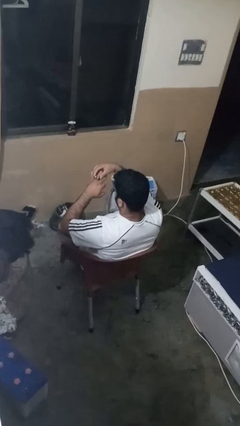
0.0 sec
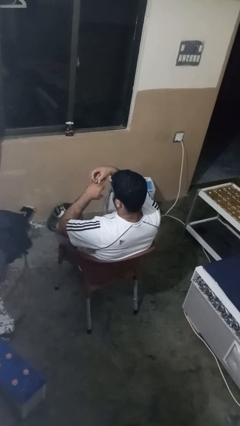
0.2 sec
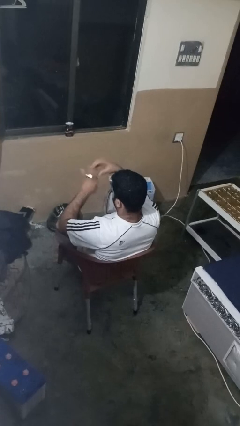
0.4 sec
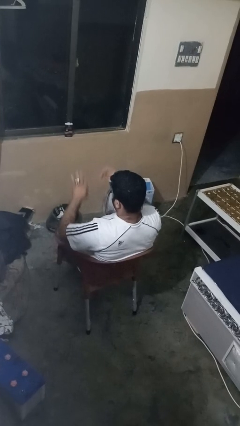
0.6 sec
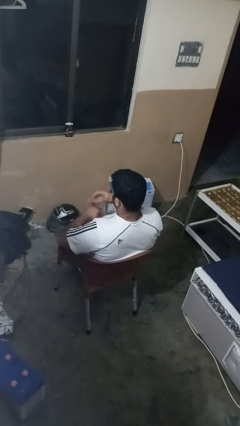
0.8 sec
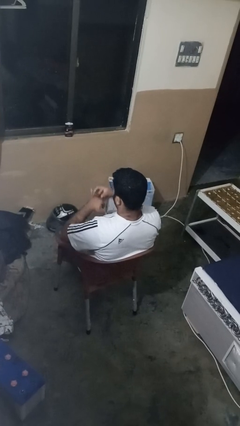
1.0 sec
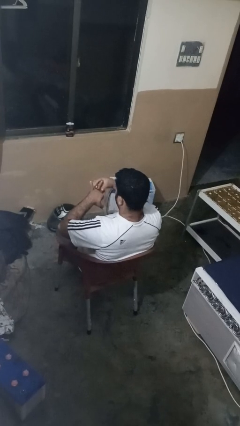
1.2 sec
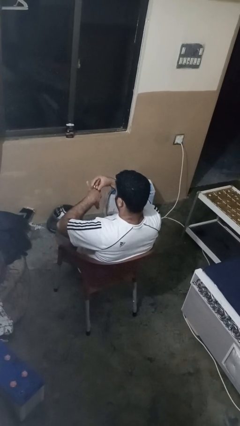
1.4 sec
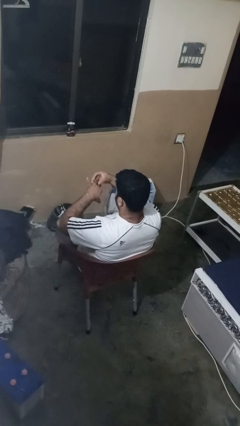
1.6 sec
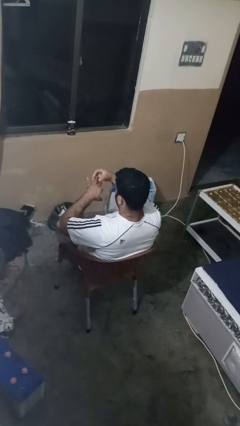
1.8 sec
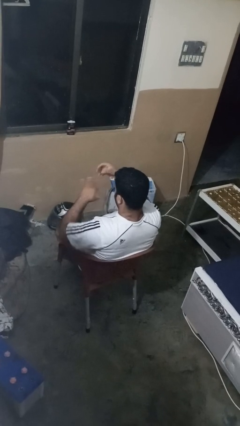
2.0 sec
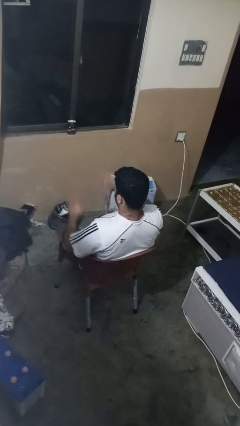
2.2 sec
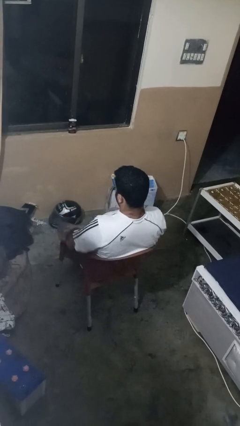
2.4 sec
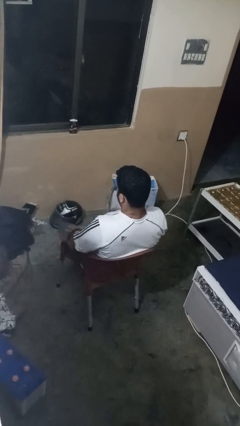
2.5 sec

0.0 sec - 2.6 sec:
person takes off ring

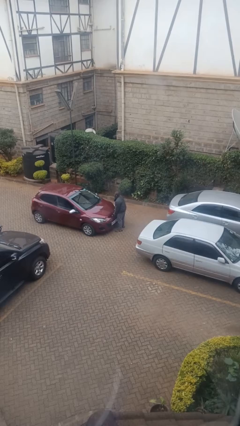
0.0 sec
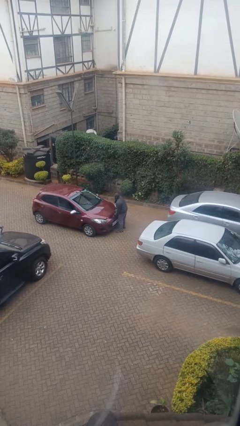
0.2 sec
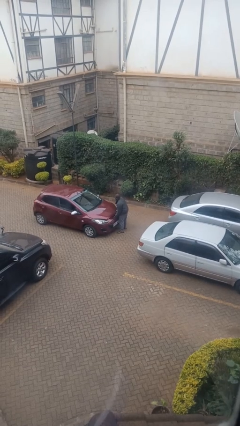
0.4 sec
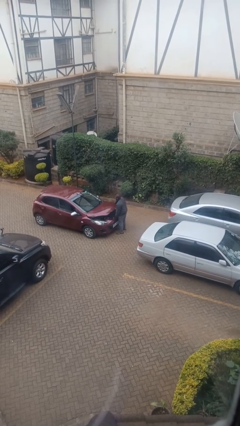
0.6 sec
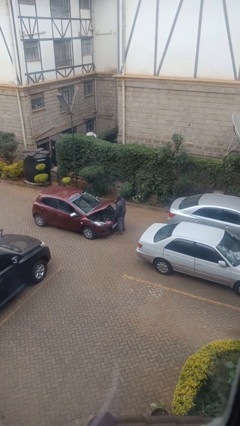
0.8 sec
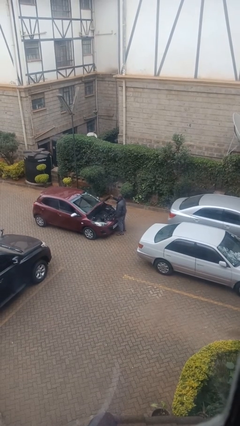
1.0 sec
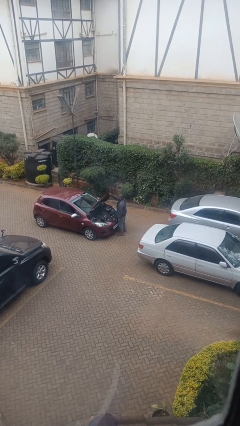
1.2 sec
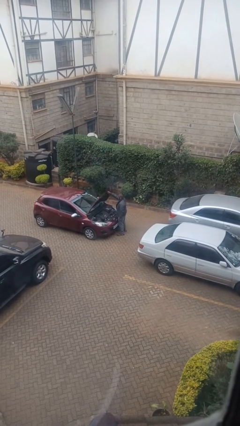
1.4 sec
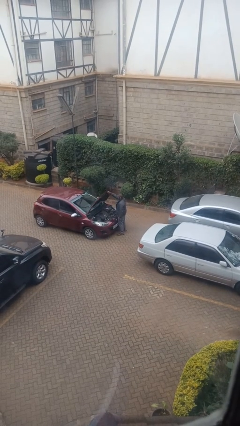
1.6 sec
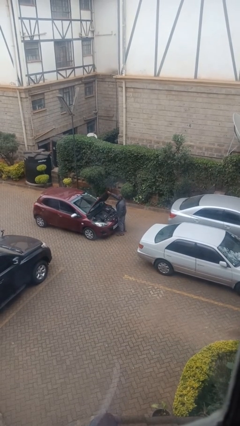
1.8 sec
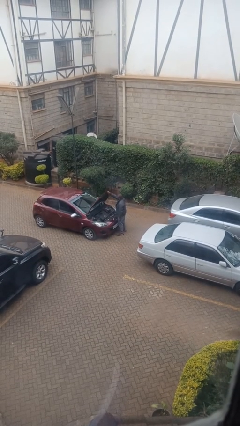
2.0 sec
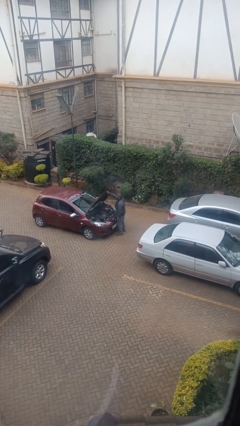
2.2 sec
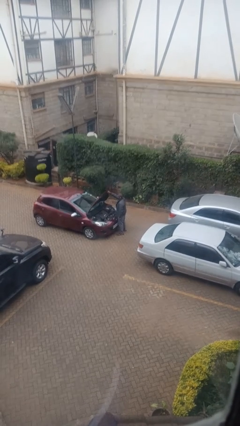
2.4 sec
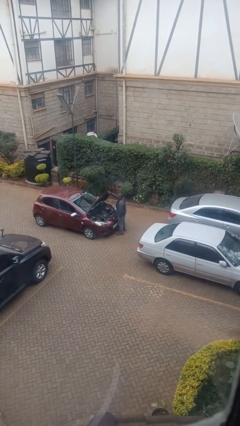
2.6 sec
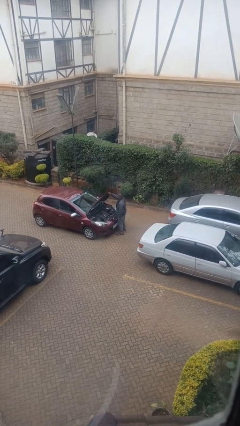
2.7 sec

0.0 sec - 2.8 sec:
person opens car hood

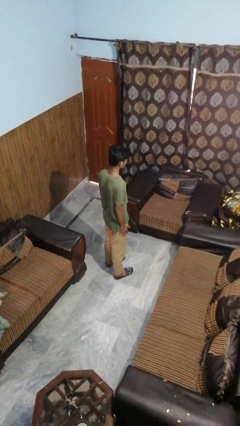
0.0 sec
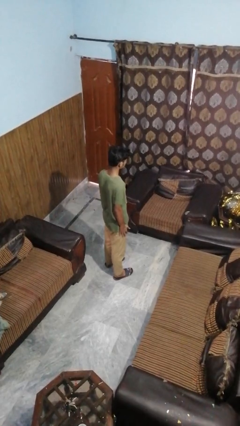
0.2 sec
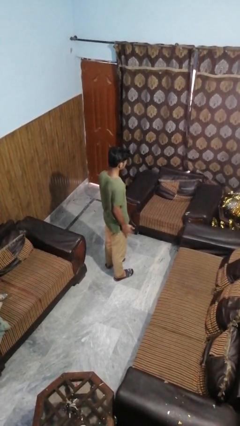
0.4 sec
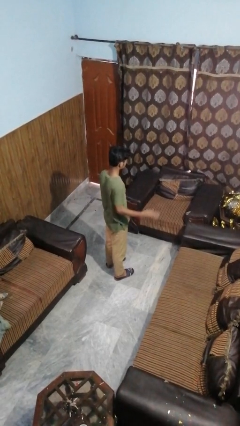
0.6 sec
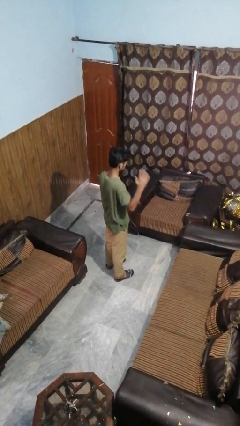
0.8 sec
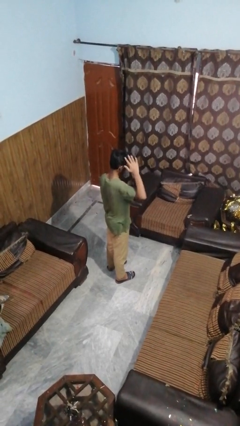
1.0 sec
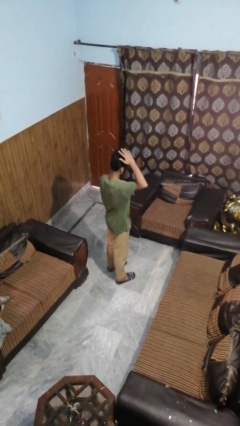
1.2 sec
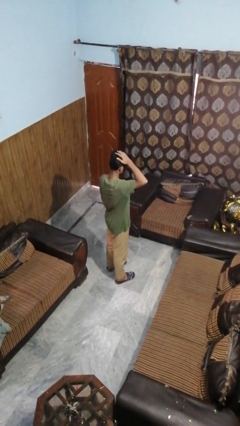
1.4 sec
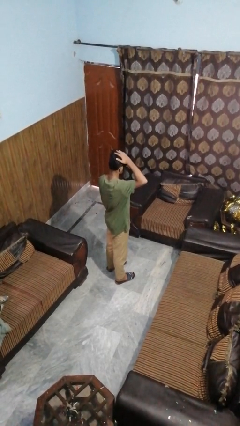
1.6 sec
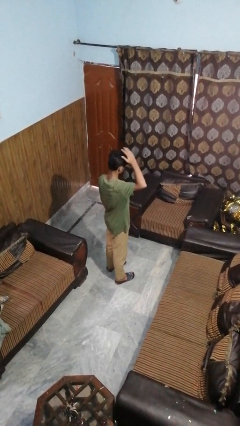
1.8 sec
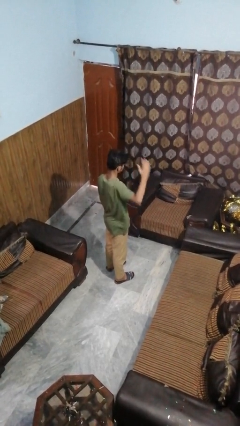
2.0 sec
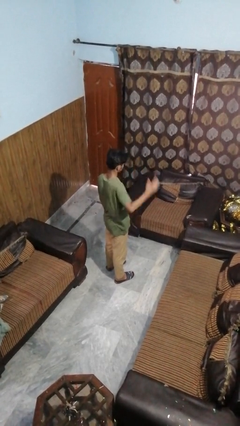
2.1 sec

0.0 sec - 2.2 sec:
person pats head

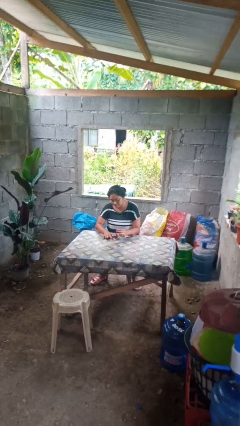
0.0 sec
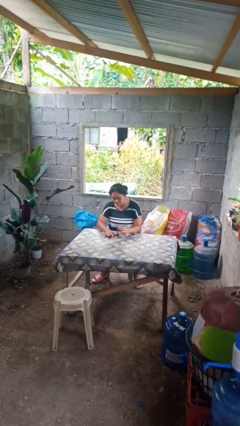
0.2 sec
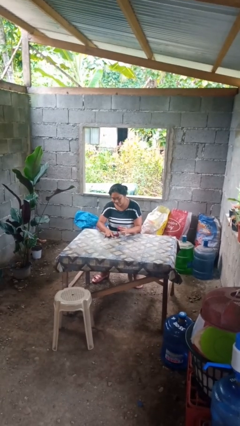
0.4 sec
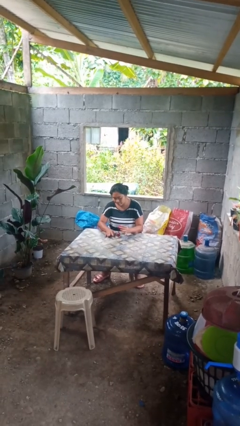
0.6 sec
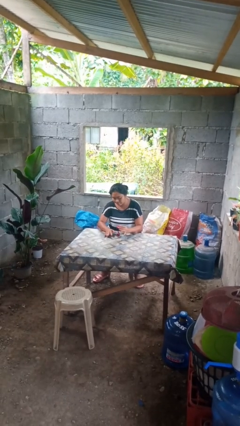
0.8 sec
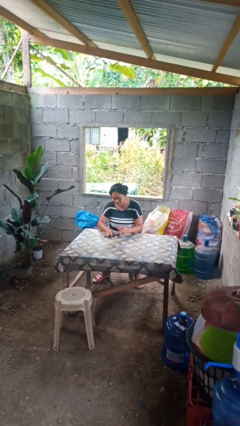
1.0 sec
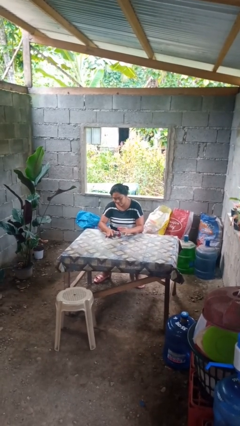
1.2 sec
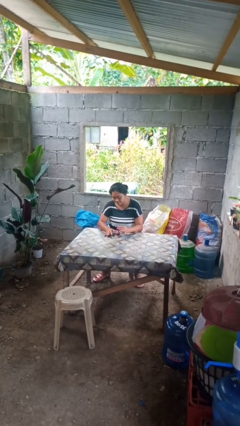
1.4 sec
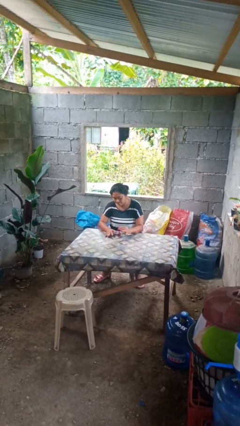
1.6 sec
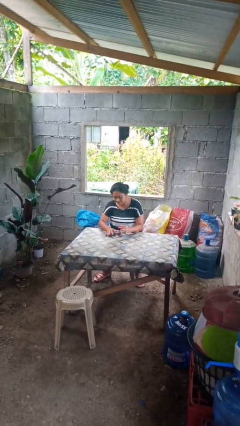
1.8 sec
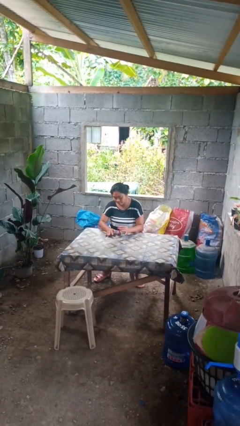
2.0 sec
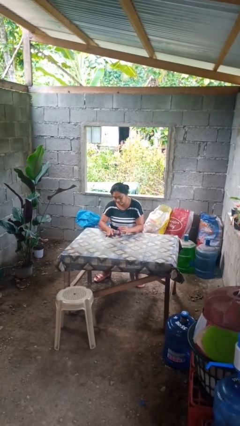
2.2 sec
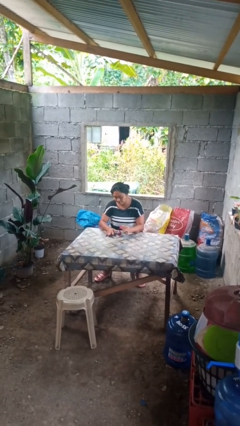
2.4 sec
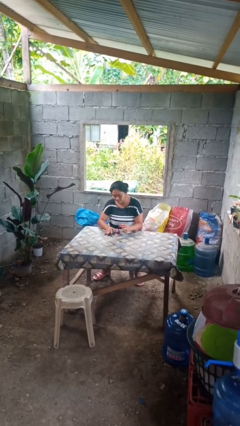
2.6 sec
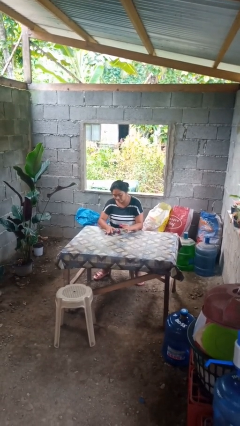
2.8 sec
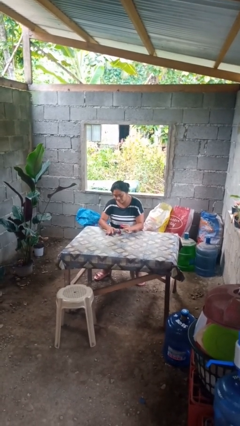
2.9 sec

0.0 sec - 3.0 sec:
person paints fingernails

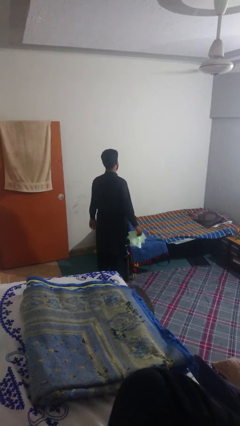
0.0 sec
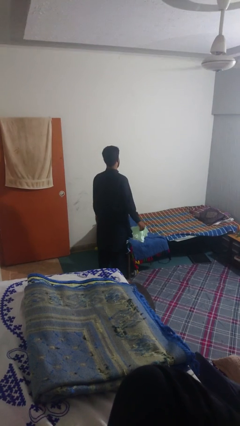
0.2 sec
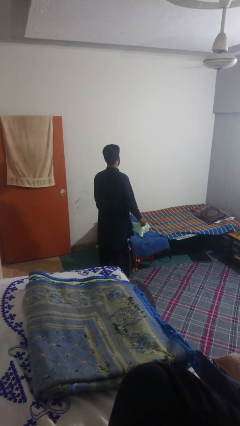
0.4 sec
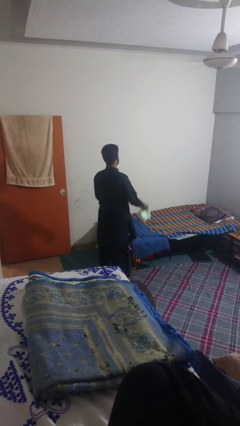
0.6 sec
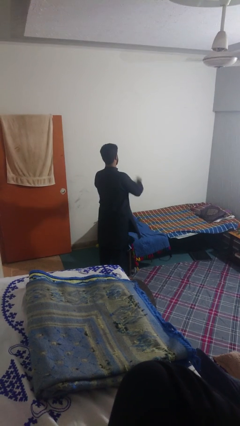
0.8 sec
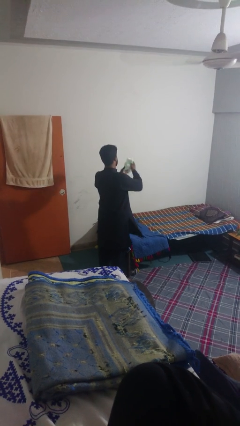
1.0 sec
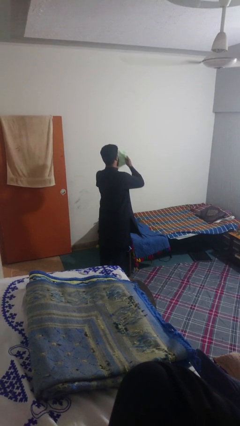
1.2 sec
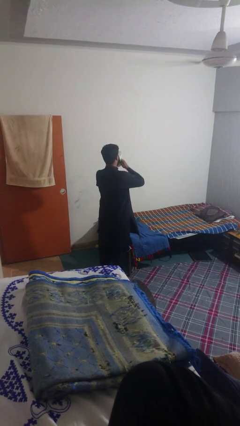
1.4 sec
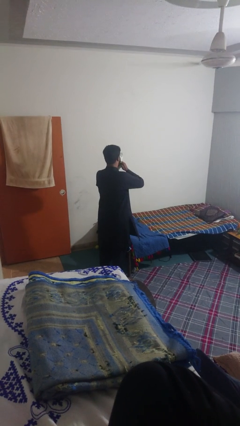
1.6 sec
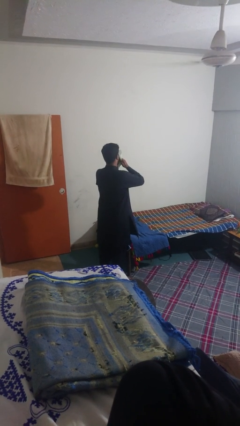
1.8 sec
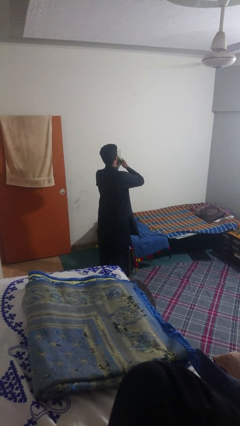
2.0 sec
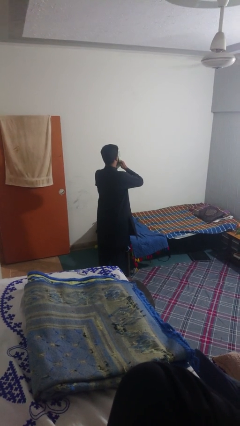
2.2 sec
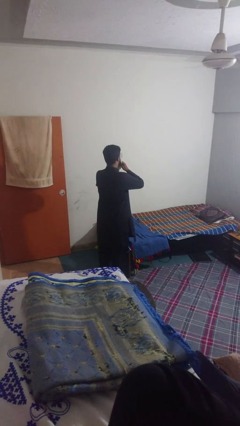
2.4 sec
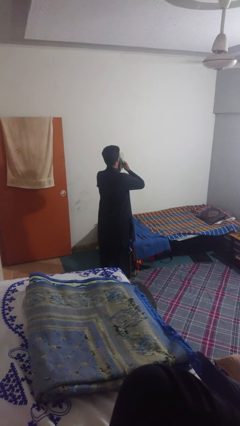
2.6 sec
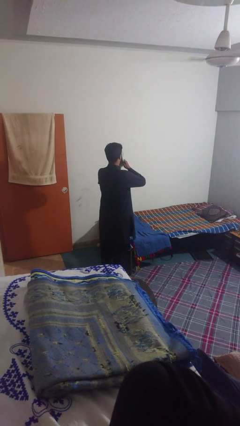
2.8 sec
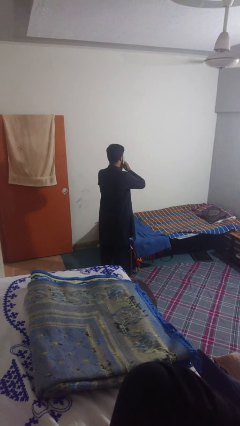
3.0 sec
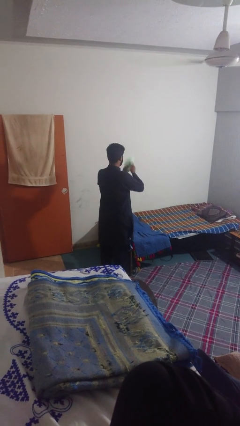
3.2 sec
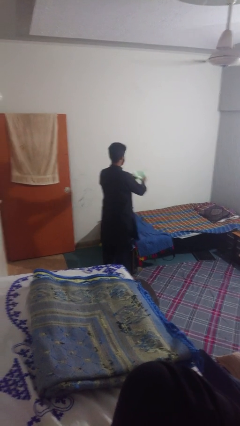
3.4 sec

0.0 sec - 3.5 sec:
person blows nose

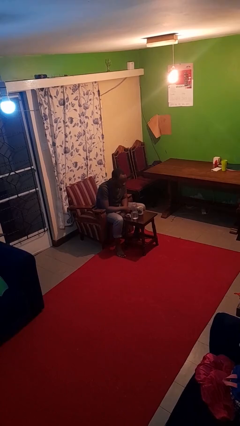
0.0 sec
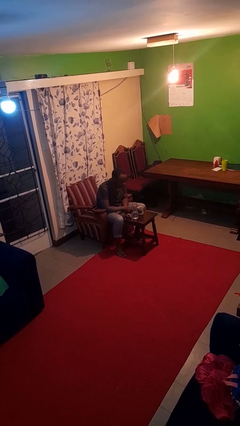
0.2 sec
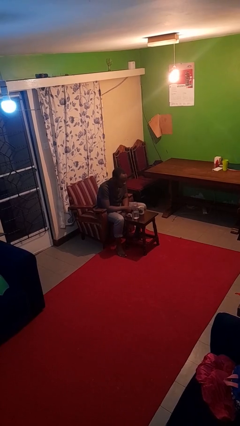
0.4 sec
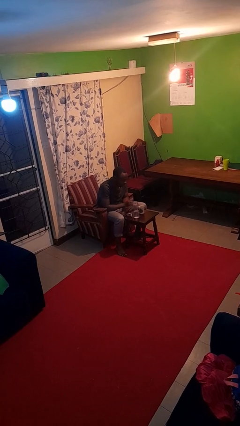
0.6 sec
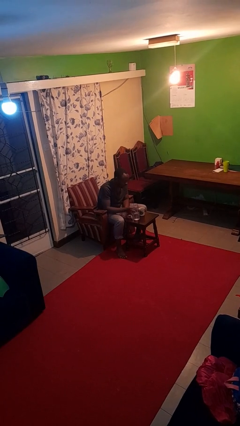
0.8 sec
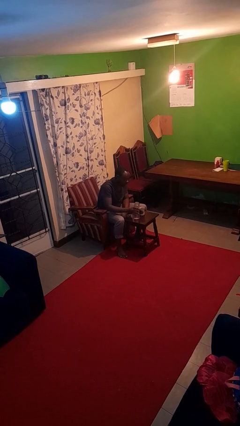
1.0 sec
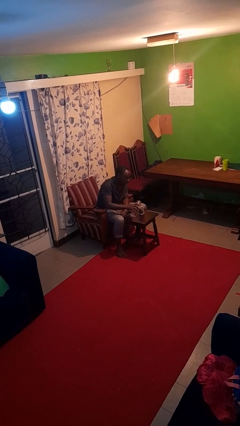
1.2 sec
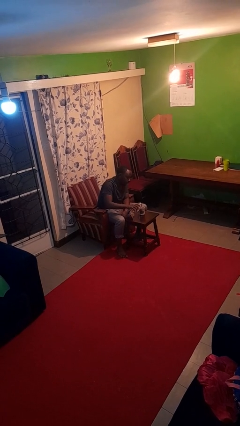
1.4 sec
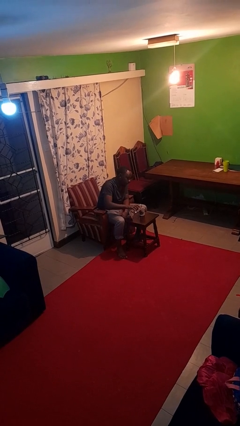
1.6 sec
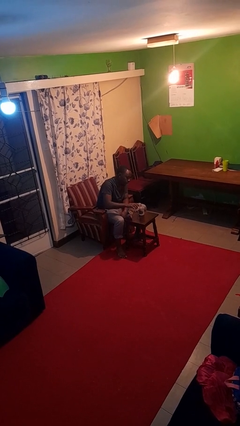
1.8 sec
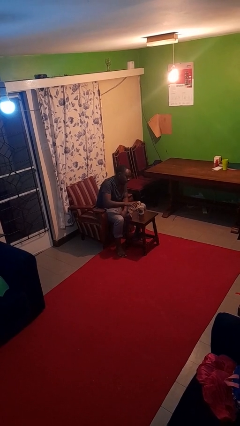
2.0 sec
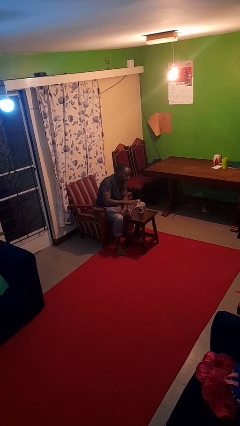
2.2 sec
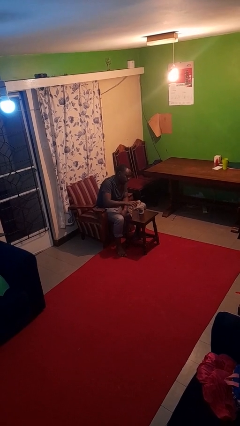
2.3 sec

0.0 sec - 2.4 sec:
person pours liquid into cup

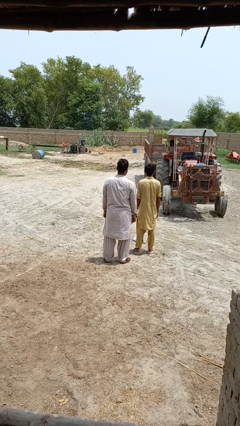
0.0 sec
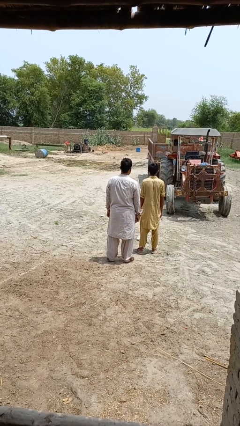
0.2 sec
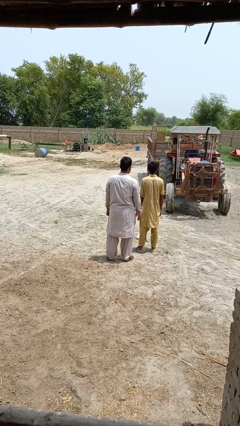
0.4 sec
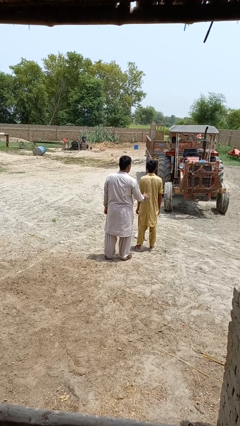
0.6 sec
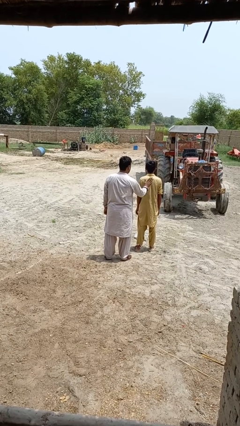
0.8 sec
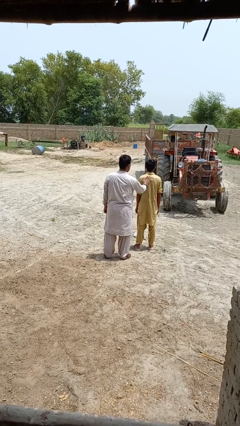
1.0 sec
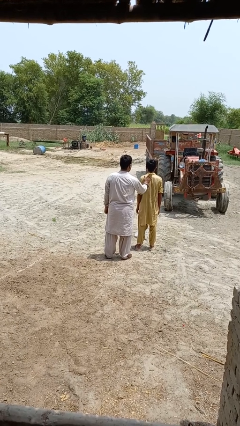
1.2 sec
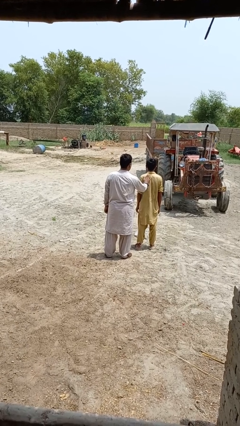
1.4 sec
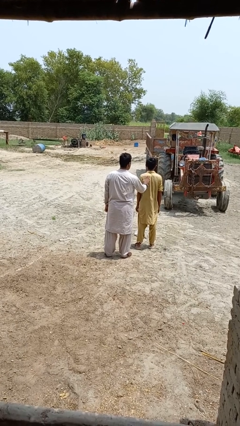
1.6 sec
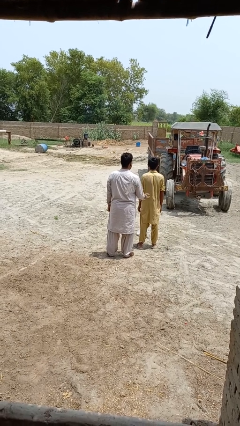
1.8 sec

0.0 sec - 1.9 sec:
person touches back of person
